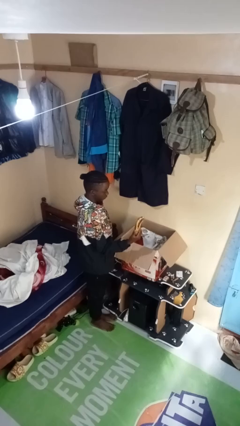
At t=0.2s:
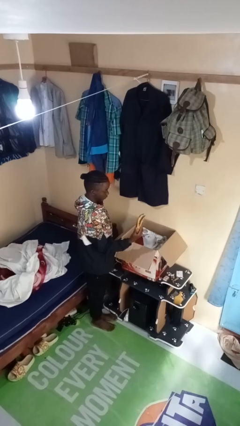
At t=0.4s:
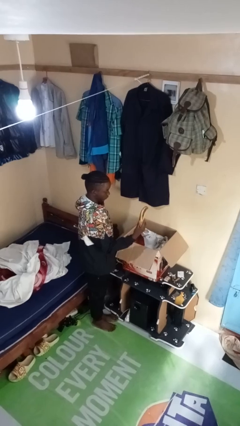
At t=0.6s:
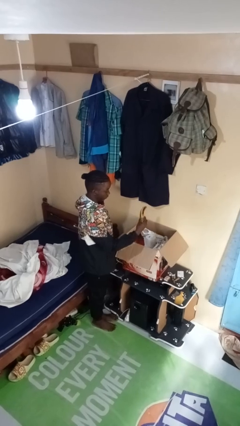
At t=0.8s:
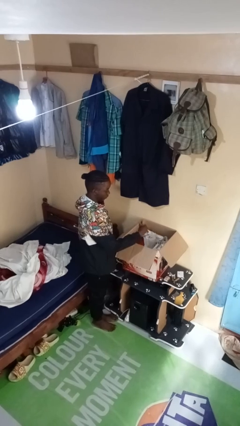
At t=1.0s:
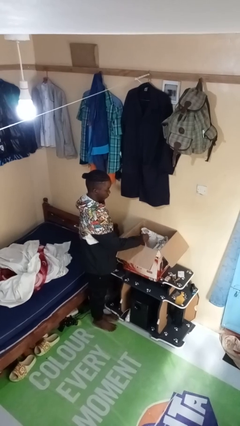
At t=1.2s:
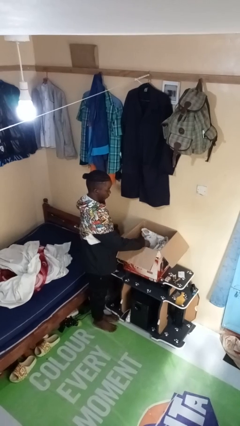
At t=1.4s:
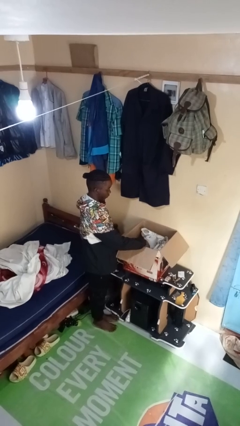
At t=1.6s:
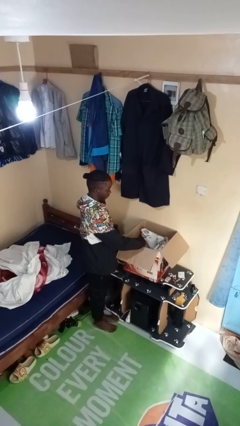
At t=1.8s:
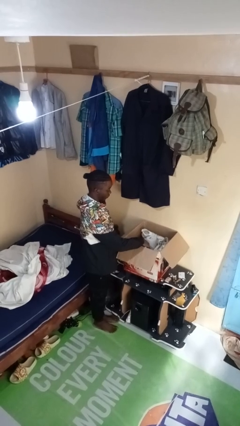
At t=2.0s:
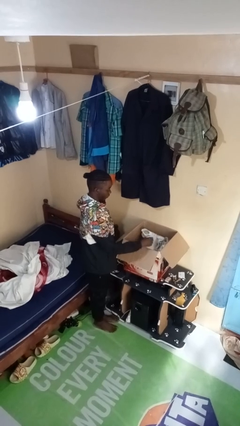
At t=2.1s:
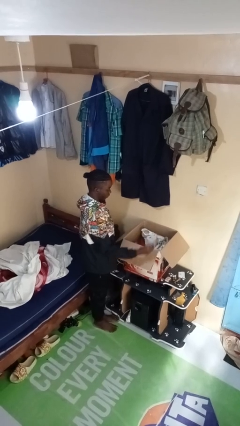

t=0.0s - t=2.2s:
person puts object into box

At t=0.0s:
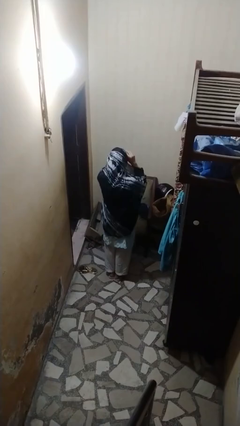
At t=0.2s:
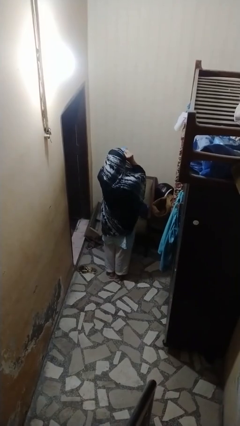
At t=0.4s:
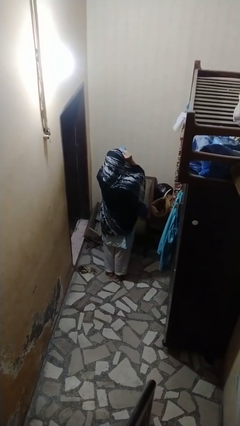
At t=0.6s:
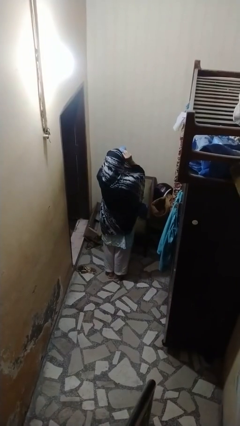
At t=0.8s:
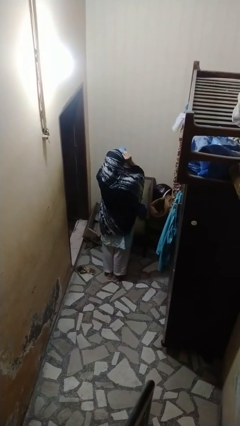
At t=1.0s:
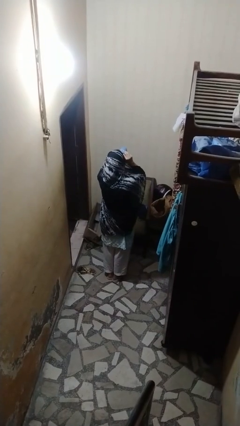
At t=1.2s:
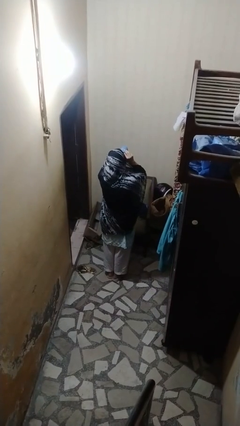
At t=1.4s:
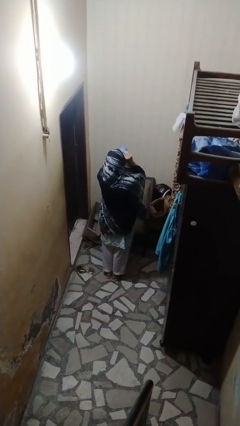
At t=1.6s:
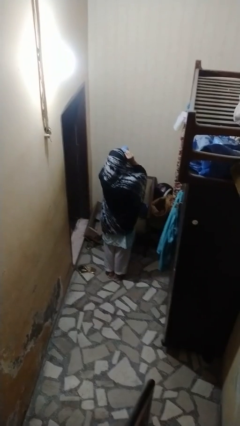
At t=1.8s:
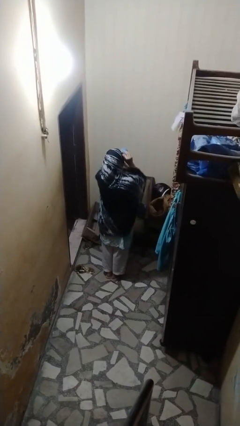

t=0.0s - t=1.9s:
person drinks from mug

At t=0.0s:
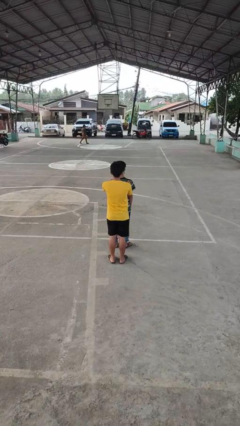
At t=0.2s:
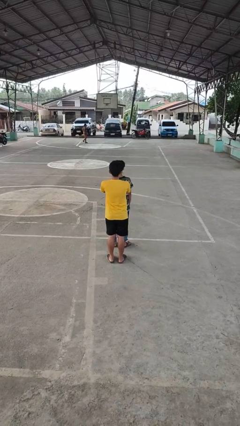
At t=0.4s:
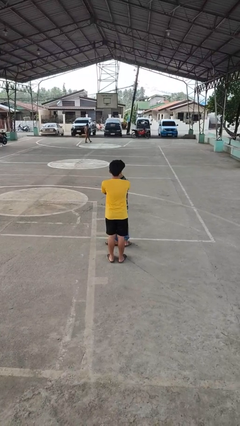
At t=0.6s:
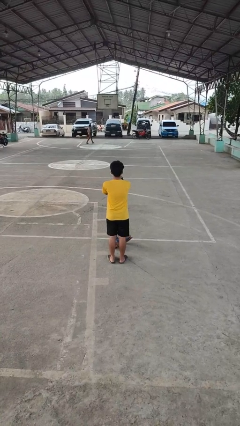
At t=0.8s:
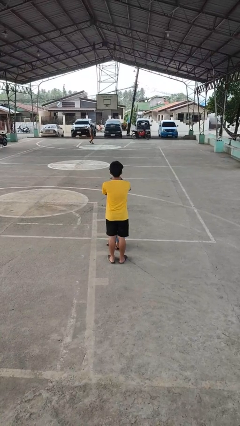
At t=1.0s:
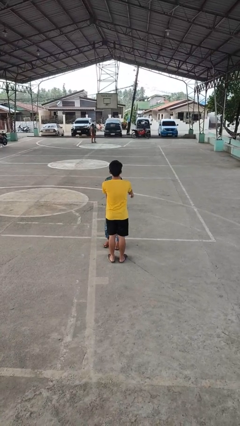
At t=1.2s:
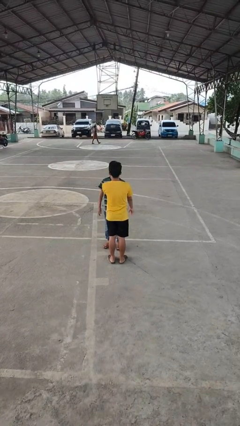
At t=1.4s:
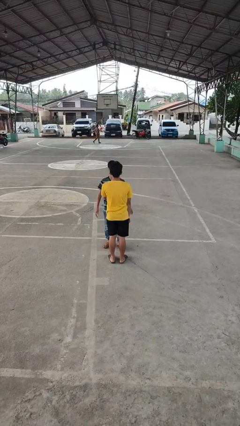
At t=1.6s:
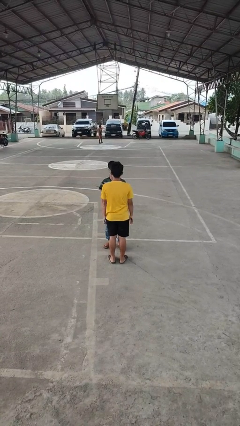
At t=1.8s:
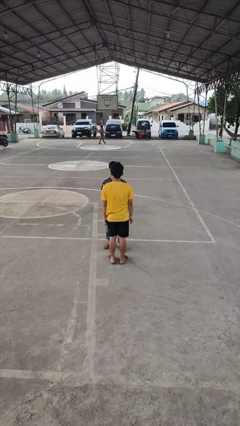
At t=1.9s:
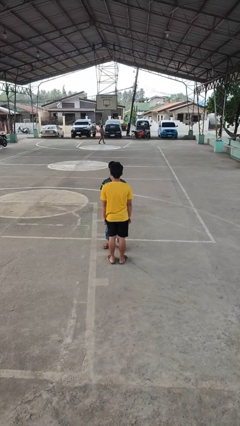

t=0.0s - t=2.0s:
person spins person around

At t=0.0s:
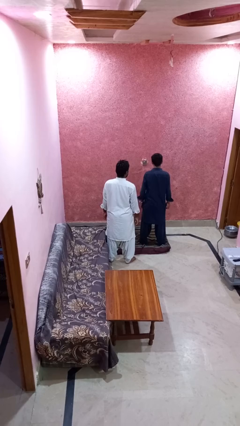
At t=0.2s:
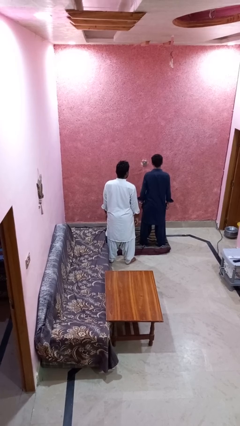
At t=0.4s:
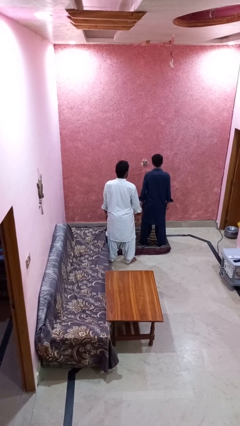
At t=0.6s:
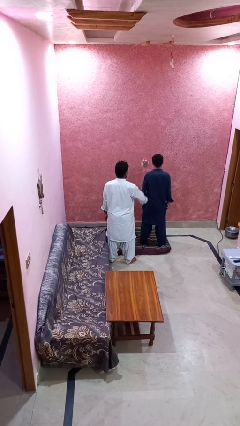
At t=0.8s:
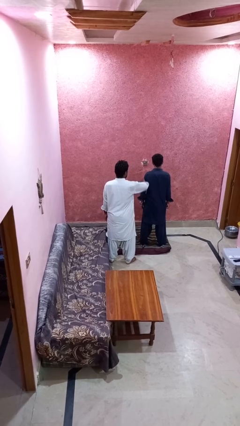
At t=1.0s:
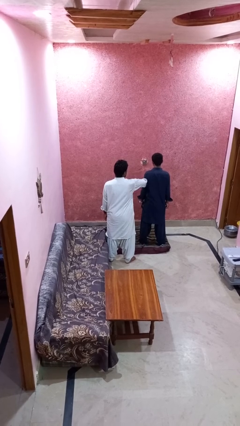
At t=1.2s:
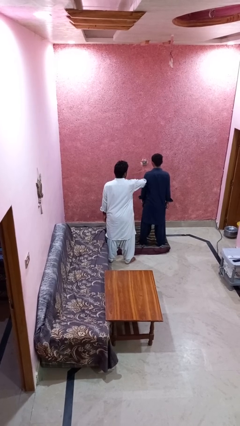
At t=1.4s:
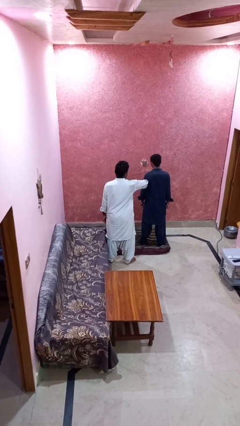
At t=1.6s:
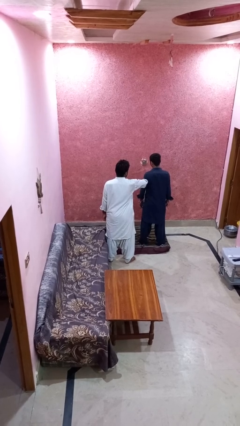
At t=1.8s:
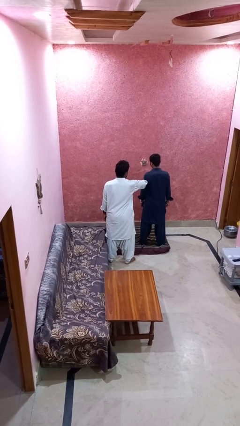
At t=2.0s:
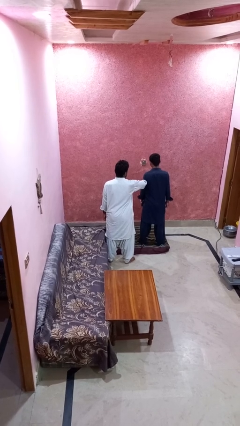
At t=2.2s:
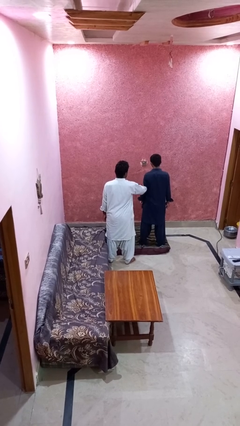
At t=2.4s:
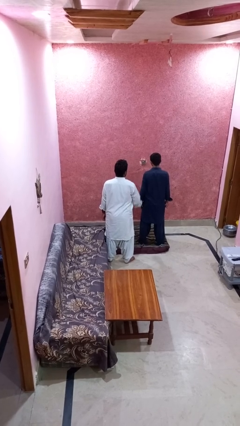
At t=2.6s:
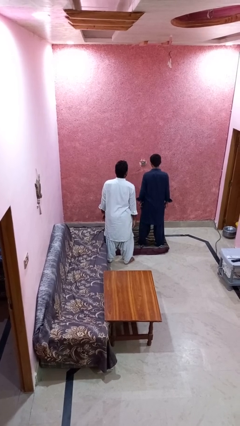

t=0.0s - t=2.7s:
person grabs person by forearm

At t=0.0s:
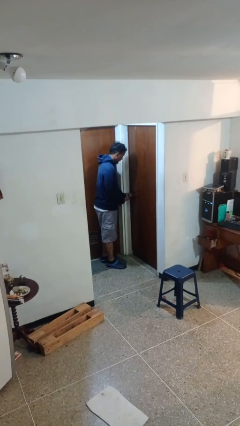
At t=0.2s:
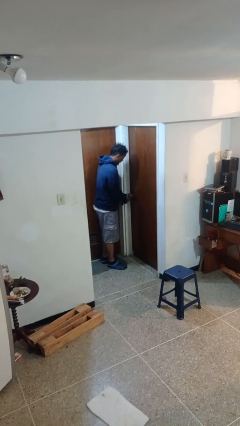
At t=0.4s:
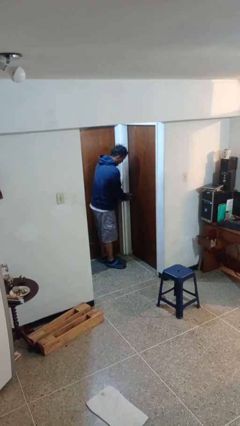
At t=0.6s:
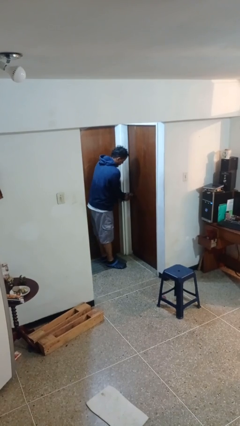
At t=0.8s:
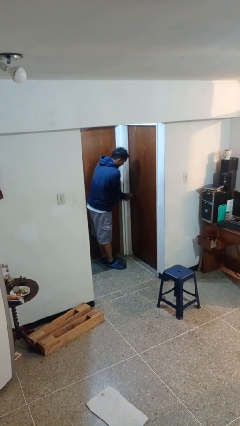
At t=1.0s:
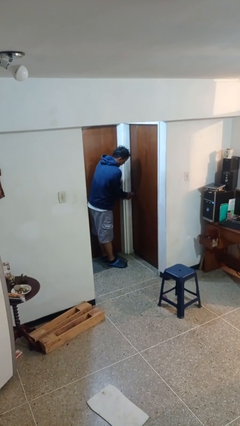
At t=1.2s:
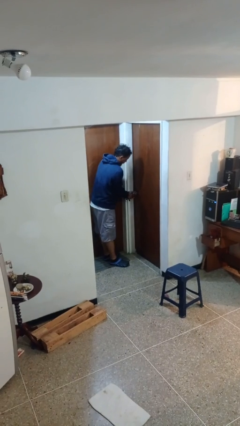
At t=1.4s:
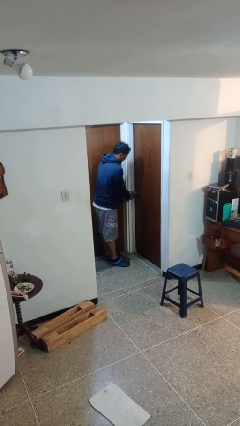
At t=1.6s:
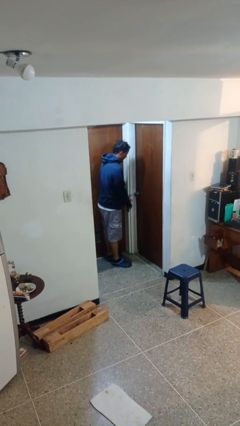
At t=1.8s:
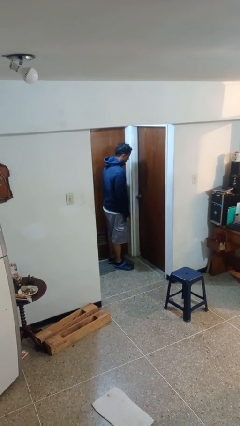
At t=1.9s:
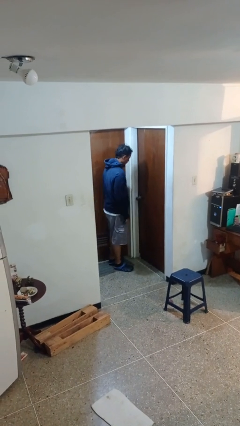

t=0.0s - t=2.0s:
person locks door with keys

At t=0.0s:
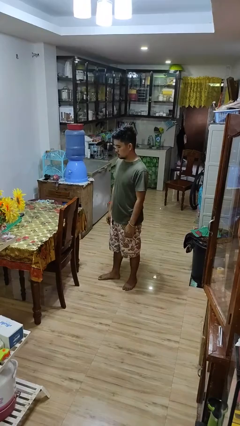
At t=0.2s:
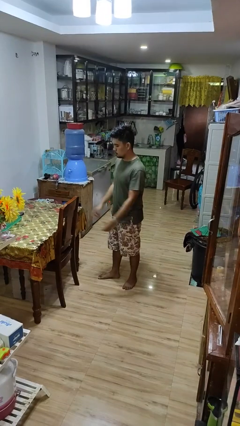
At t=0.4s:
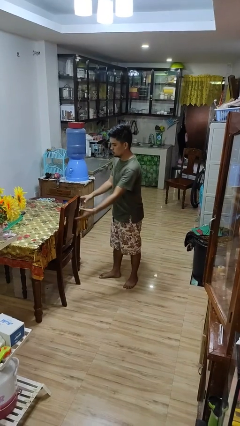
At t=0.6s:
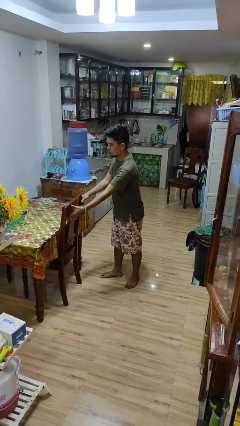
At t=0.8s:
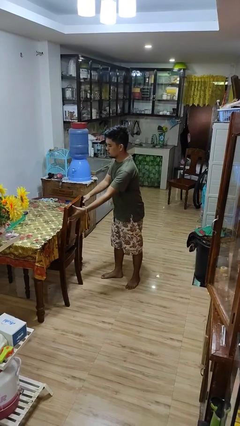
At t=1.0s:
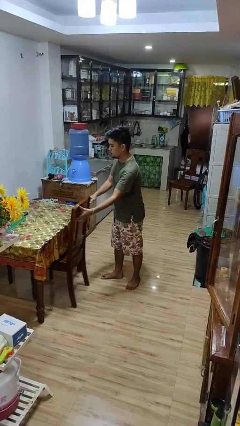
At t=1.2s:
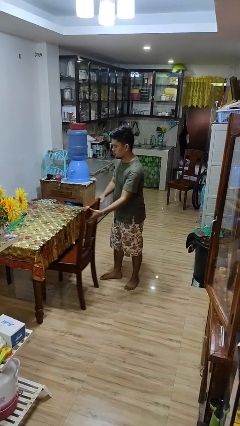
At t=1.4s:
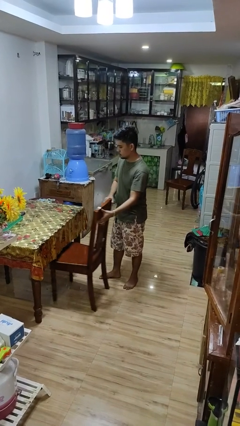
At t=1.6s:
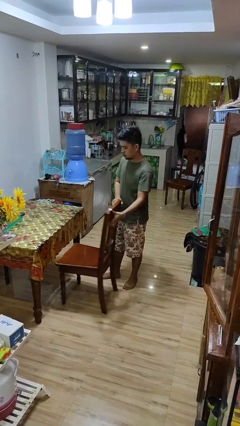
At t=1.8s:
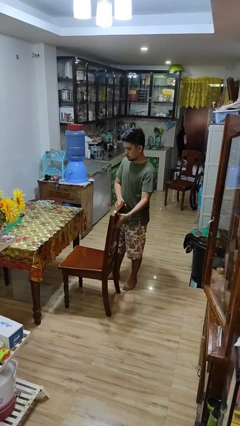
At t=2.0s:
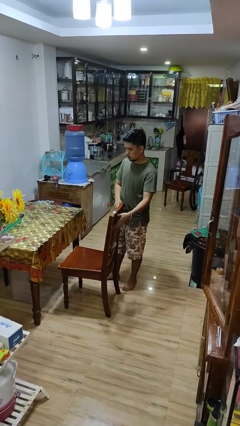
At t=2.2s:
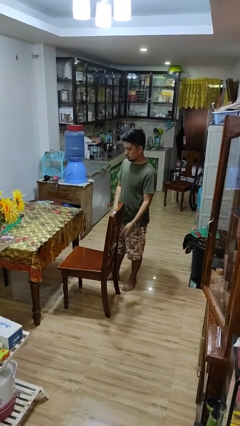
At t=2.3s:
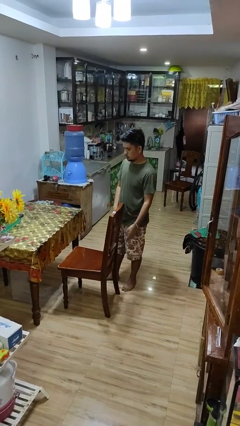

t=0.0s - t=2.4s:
person pulls out chair

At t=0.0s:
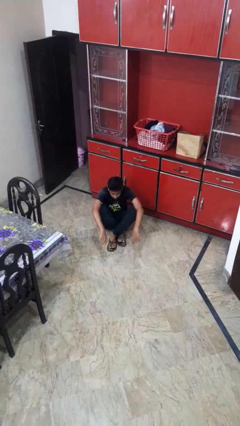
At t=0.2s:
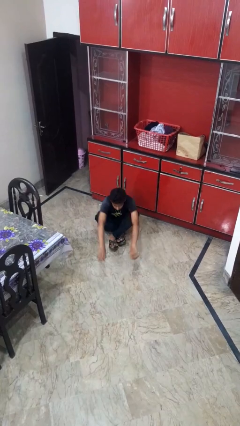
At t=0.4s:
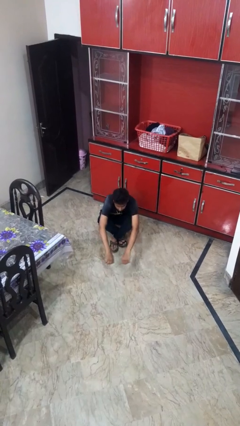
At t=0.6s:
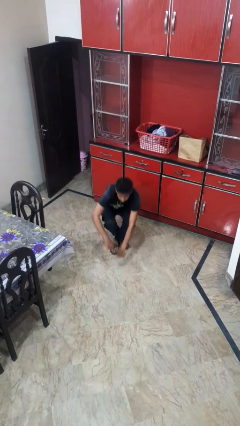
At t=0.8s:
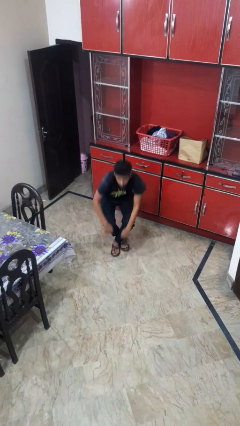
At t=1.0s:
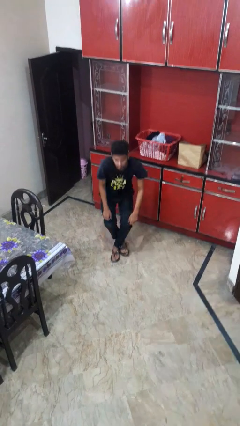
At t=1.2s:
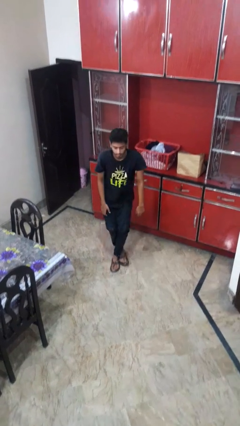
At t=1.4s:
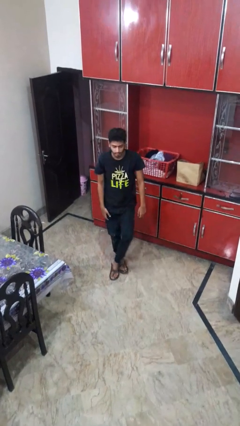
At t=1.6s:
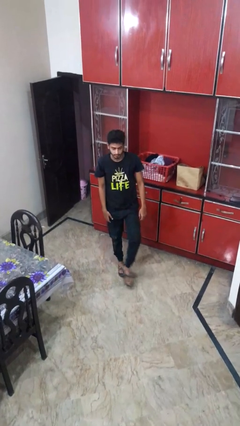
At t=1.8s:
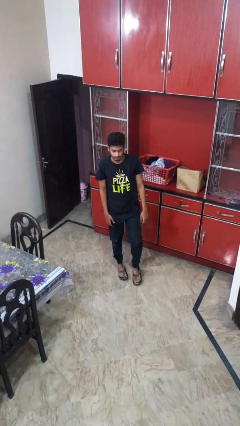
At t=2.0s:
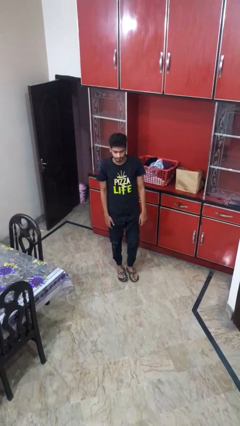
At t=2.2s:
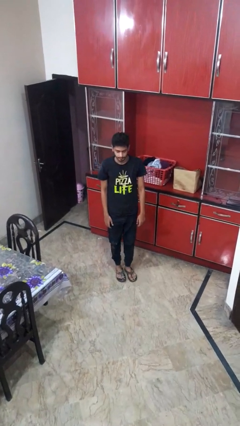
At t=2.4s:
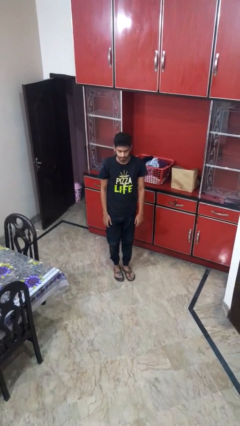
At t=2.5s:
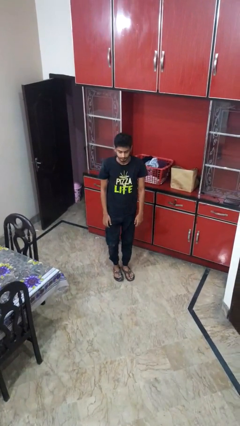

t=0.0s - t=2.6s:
person stands up from floor

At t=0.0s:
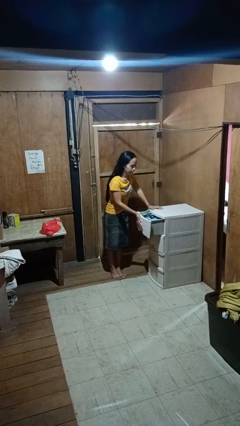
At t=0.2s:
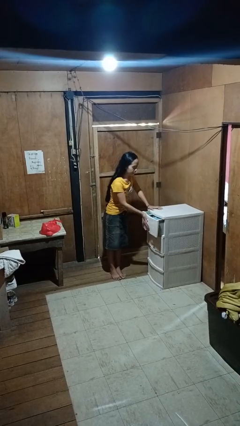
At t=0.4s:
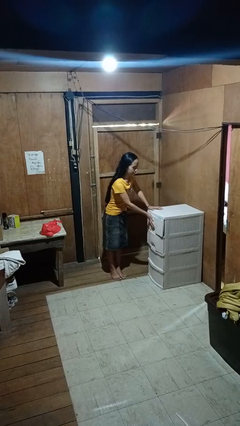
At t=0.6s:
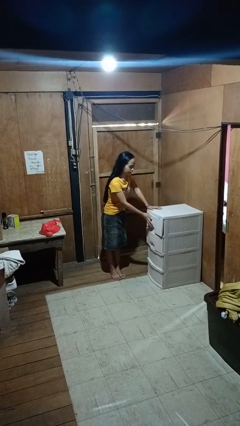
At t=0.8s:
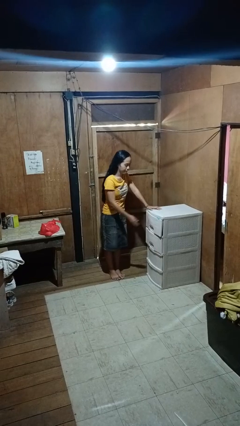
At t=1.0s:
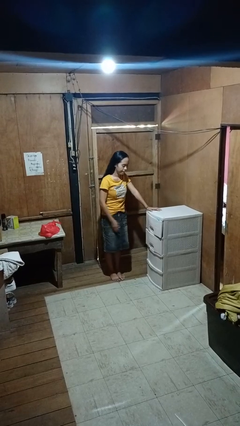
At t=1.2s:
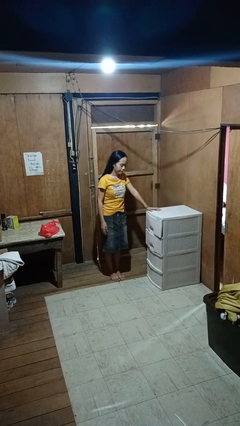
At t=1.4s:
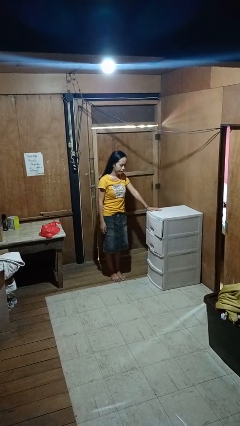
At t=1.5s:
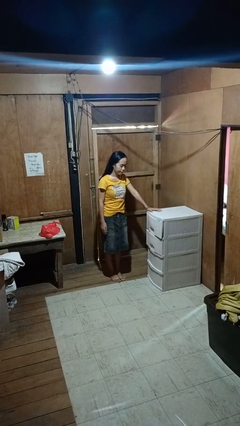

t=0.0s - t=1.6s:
person closes dresser drawer
